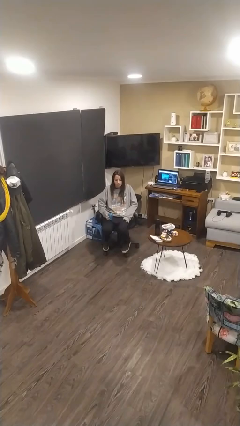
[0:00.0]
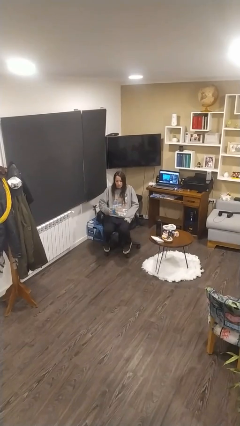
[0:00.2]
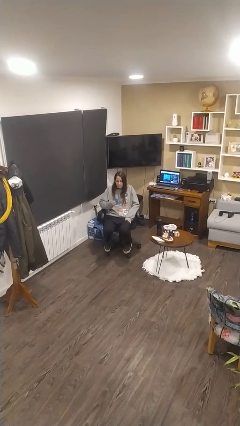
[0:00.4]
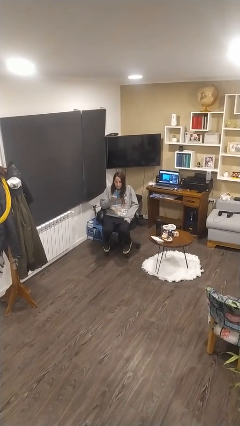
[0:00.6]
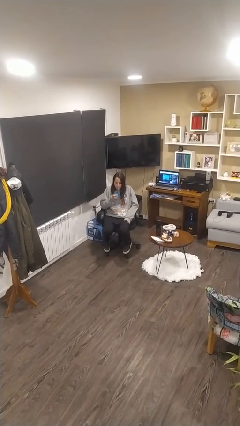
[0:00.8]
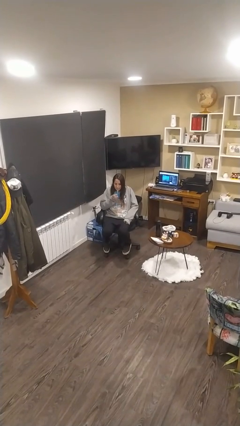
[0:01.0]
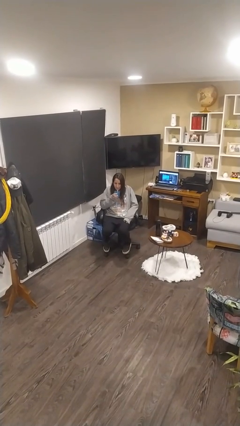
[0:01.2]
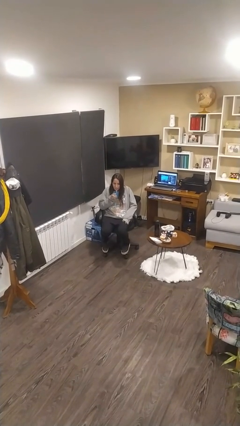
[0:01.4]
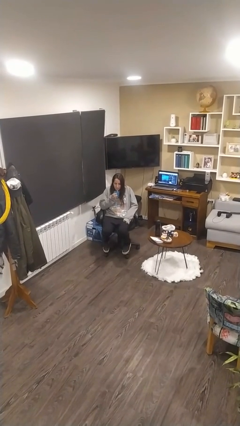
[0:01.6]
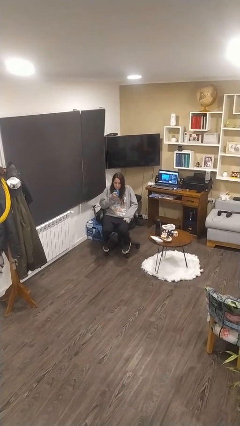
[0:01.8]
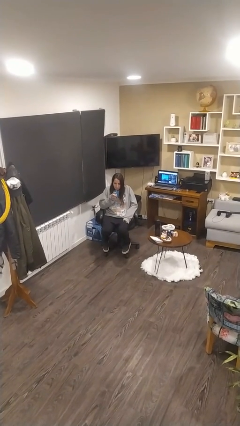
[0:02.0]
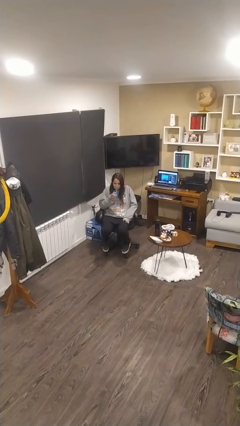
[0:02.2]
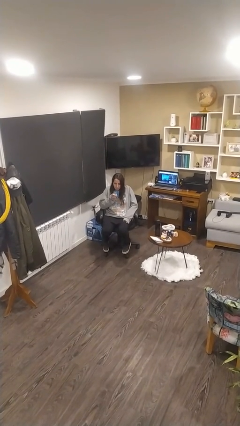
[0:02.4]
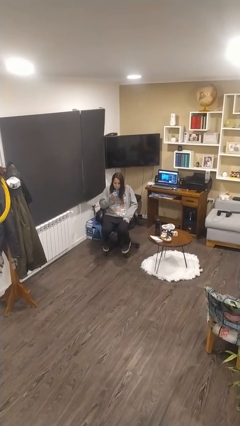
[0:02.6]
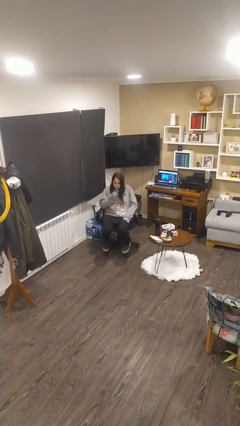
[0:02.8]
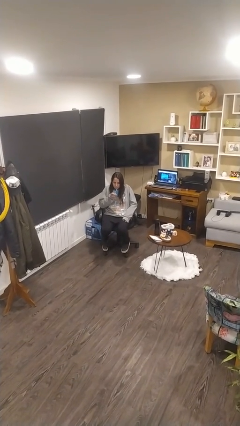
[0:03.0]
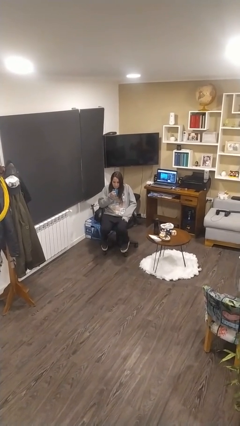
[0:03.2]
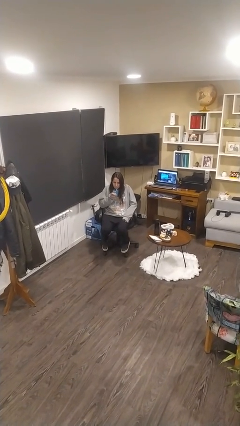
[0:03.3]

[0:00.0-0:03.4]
person drinks from straw

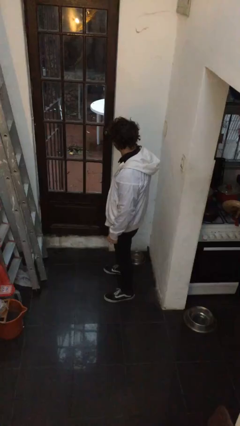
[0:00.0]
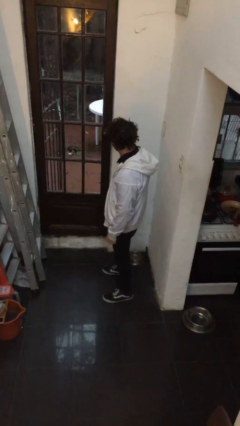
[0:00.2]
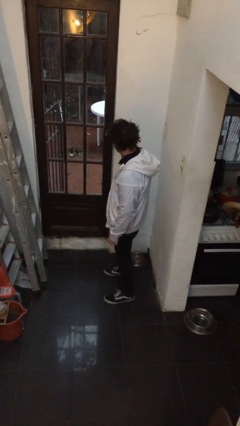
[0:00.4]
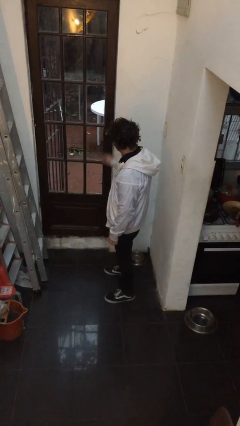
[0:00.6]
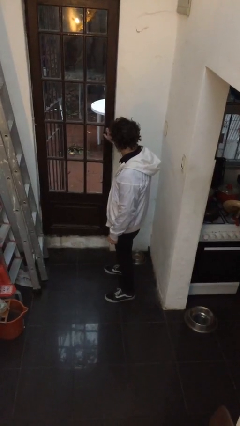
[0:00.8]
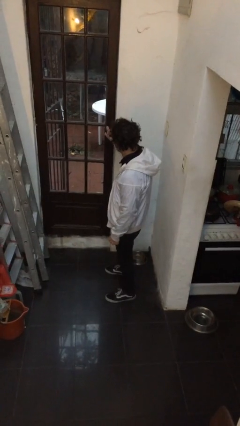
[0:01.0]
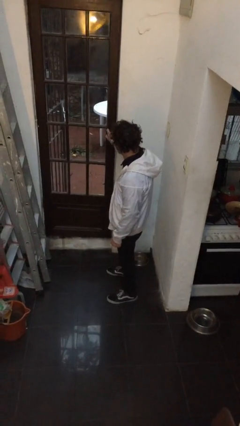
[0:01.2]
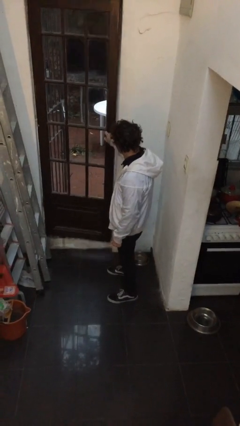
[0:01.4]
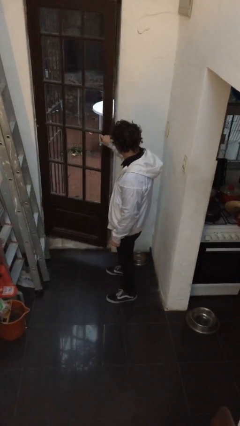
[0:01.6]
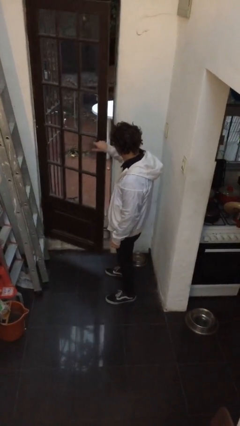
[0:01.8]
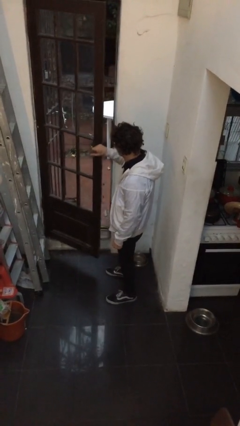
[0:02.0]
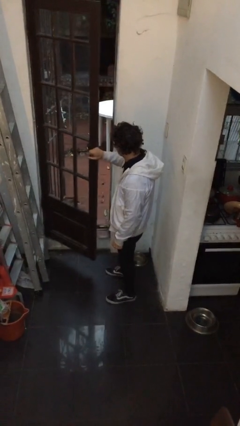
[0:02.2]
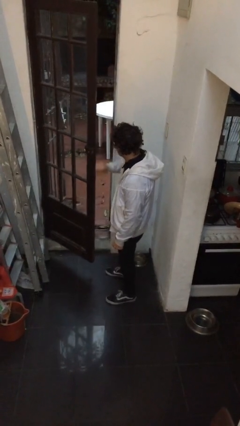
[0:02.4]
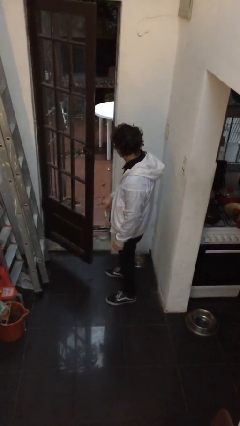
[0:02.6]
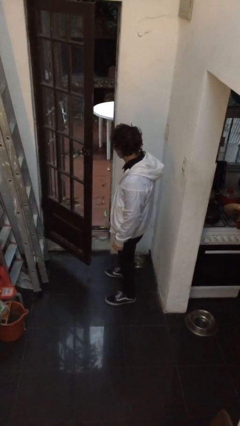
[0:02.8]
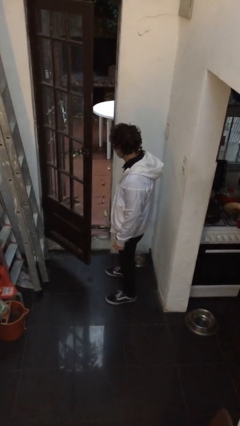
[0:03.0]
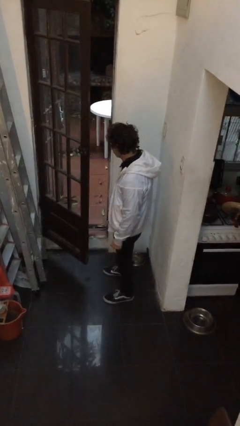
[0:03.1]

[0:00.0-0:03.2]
person opens facility door

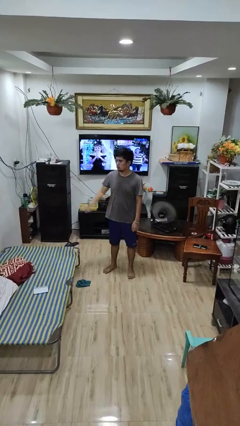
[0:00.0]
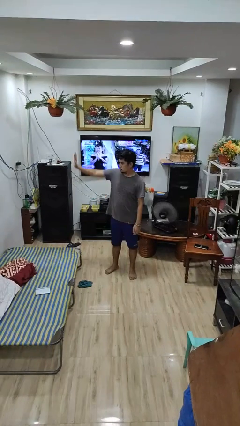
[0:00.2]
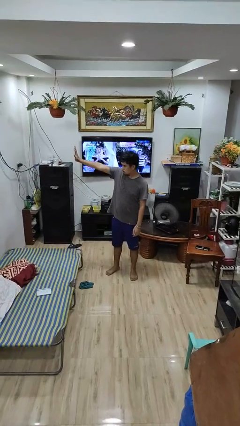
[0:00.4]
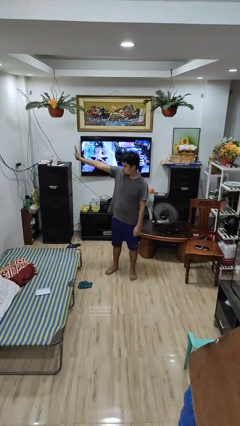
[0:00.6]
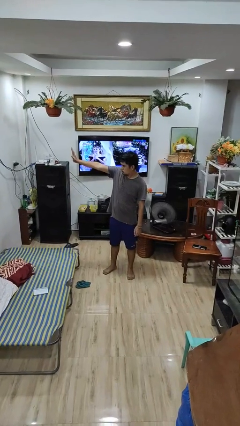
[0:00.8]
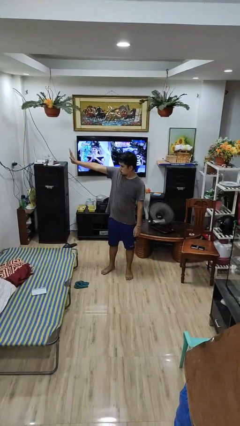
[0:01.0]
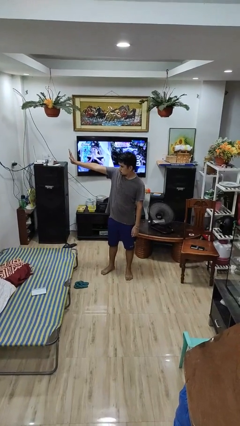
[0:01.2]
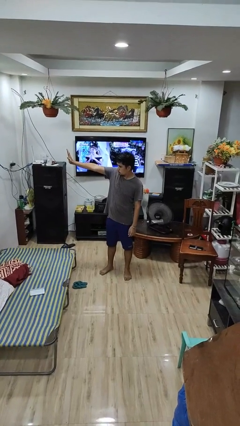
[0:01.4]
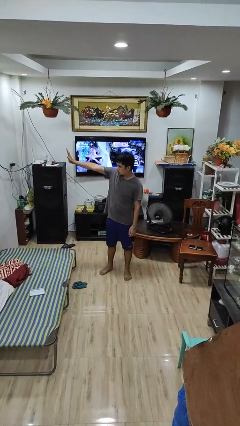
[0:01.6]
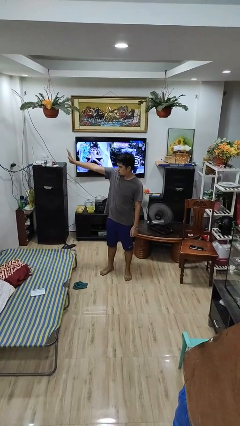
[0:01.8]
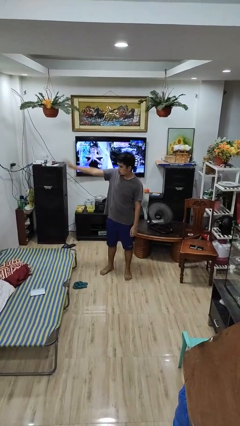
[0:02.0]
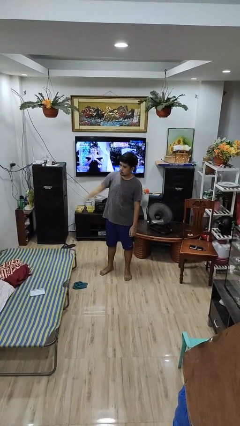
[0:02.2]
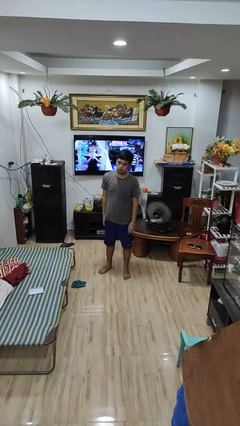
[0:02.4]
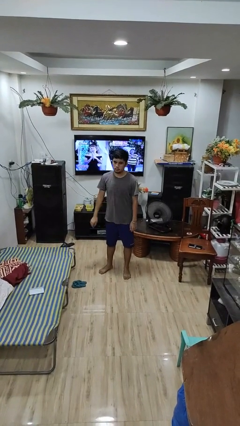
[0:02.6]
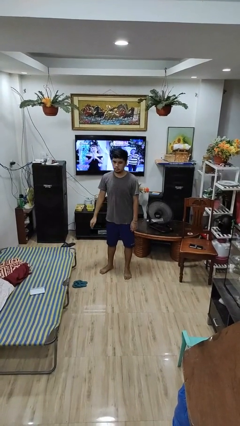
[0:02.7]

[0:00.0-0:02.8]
person gestures stop

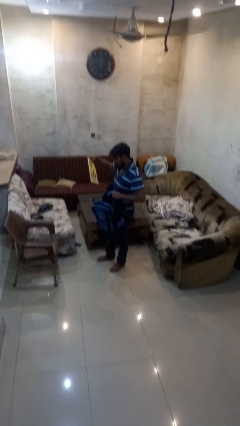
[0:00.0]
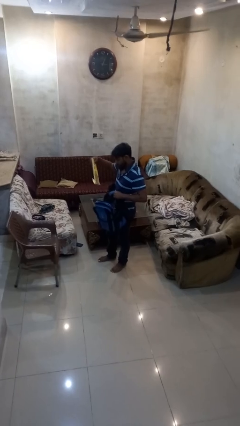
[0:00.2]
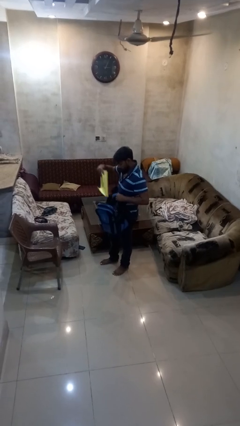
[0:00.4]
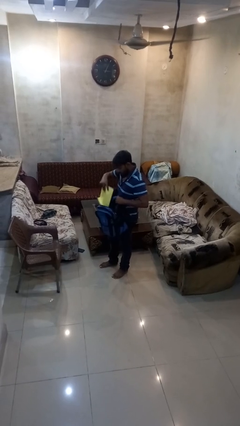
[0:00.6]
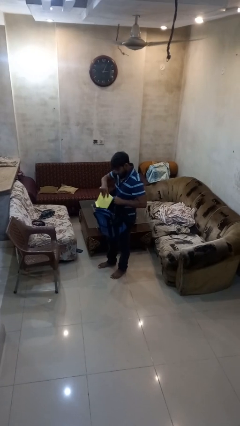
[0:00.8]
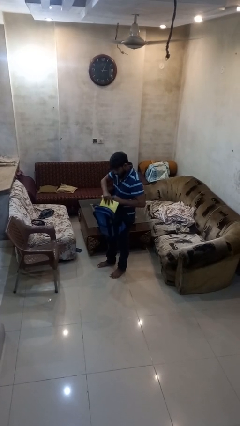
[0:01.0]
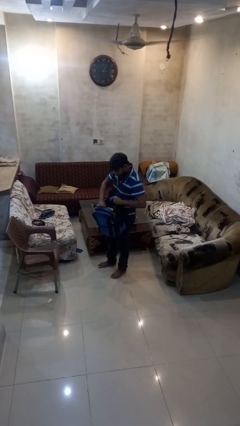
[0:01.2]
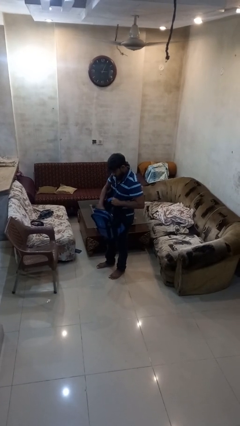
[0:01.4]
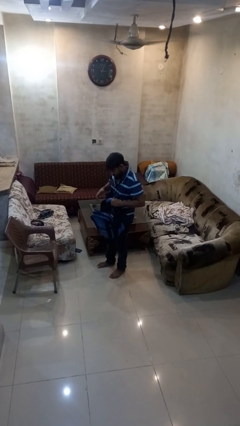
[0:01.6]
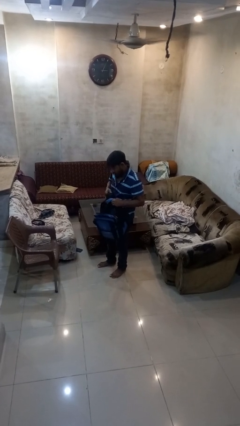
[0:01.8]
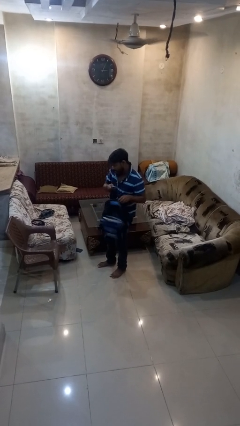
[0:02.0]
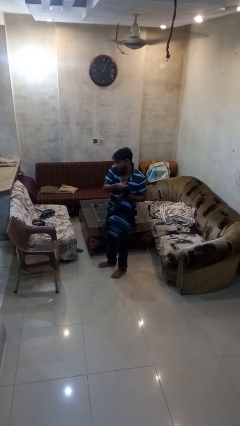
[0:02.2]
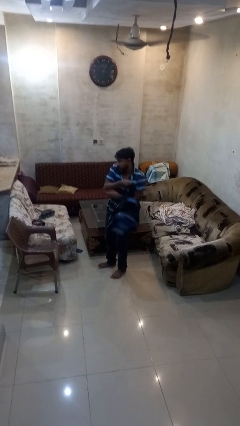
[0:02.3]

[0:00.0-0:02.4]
person puts object into backpack

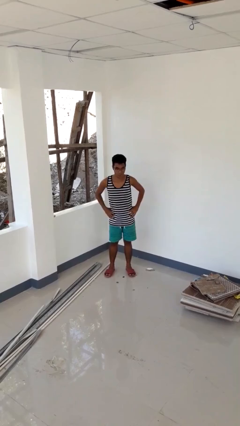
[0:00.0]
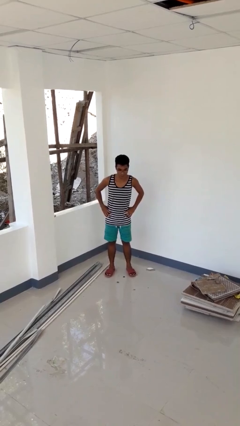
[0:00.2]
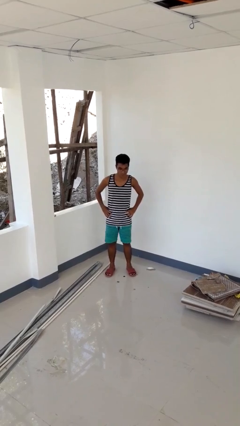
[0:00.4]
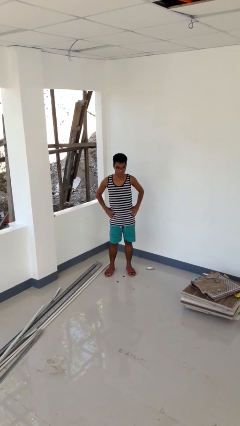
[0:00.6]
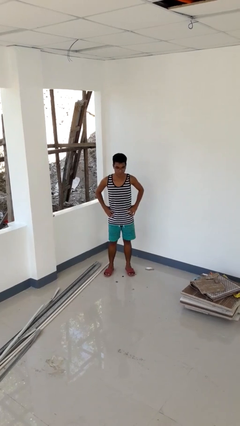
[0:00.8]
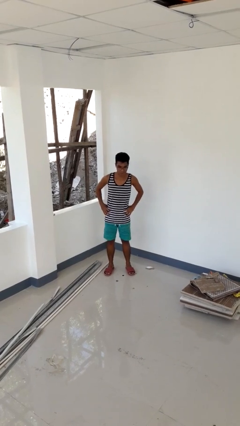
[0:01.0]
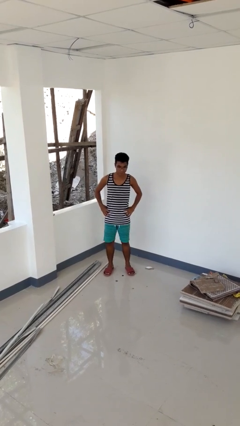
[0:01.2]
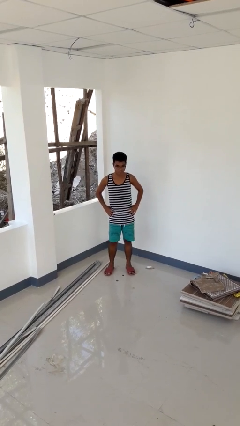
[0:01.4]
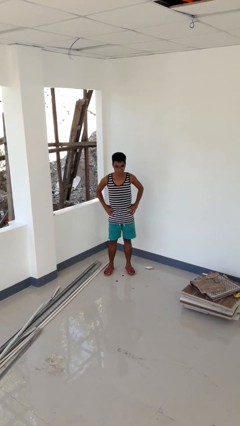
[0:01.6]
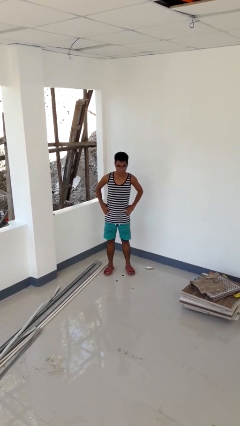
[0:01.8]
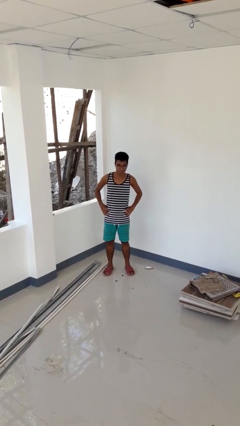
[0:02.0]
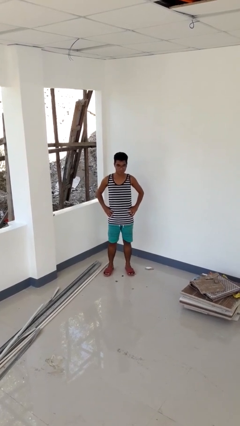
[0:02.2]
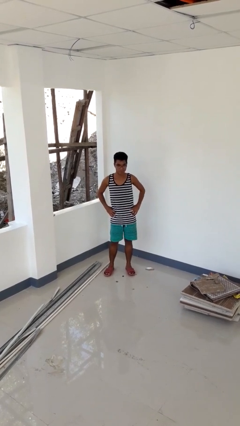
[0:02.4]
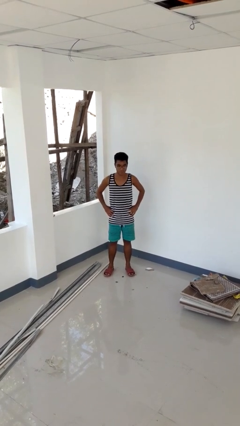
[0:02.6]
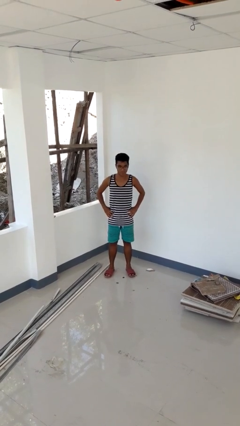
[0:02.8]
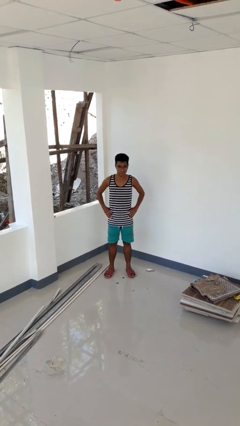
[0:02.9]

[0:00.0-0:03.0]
person wiggles hips

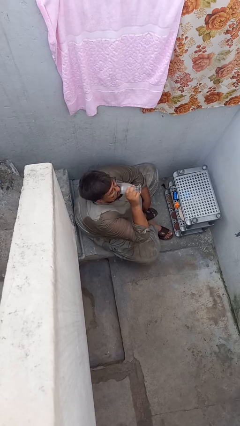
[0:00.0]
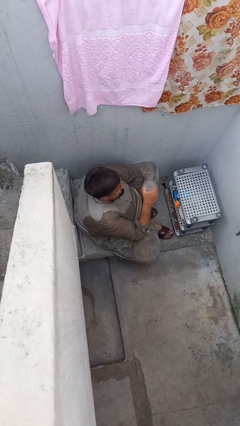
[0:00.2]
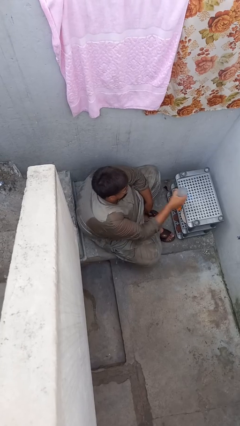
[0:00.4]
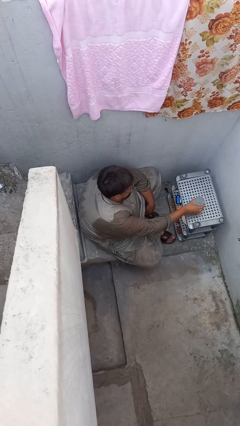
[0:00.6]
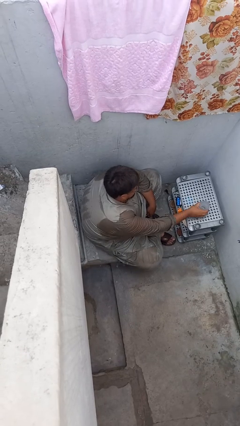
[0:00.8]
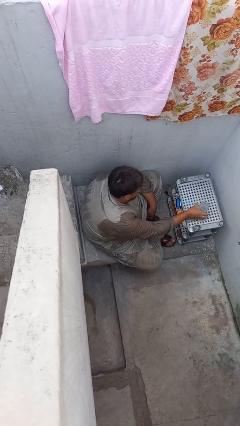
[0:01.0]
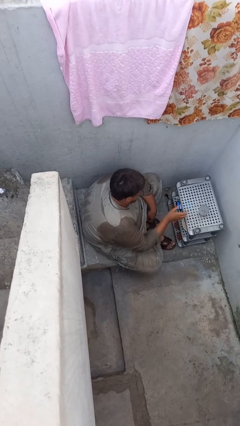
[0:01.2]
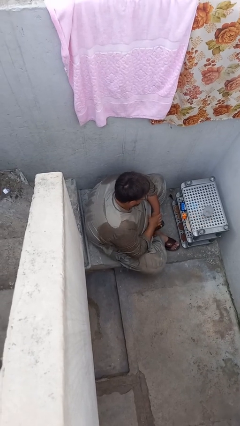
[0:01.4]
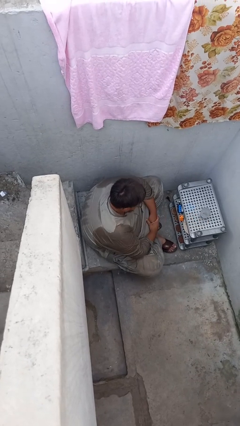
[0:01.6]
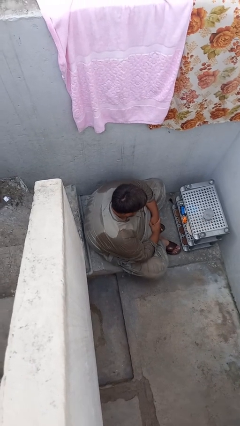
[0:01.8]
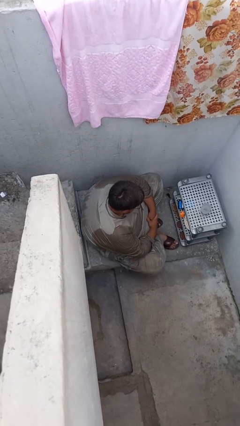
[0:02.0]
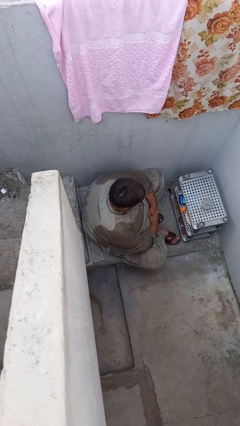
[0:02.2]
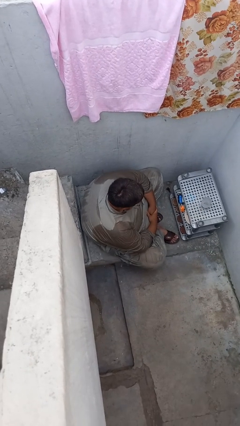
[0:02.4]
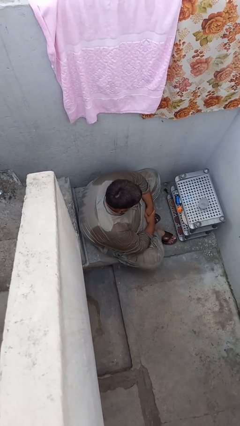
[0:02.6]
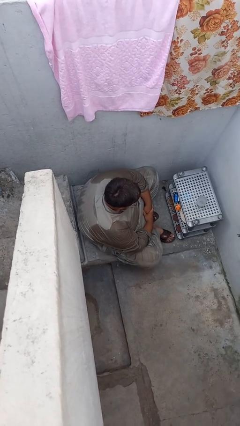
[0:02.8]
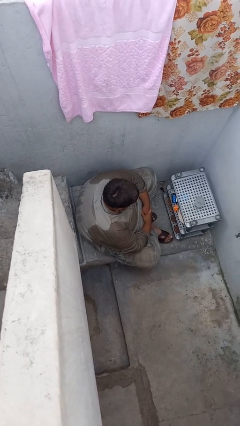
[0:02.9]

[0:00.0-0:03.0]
person puts down object on table
